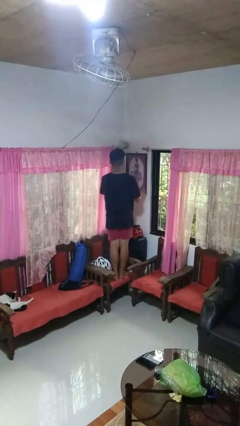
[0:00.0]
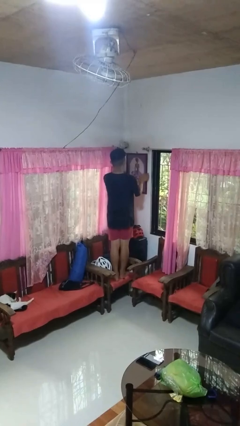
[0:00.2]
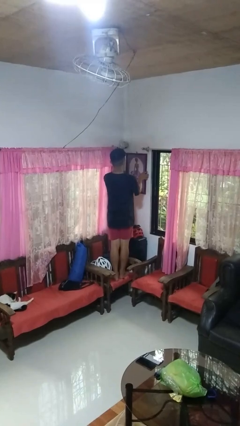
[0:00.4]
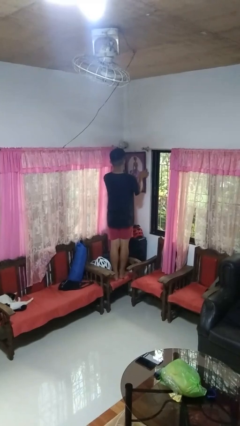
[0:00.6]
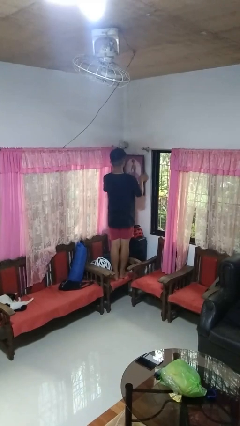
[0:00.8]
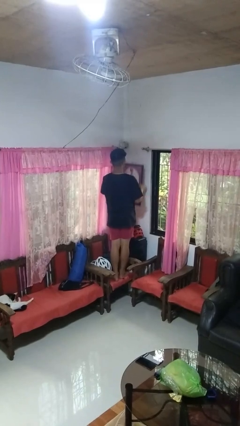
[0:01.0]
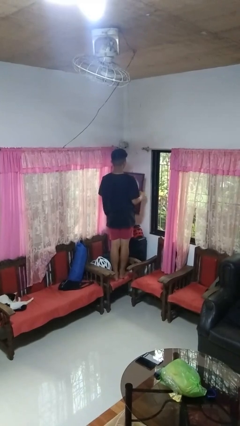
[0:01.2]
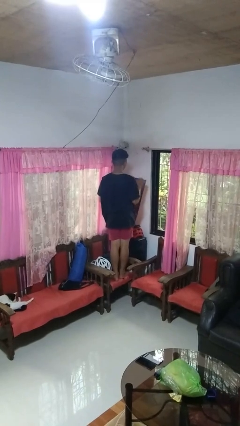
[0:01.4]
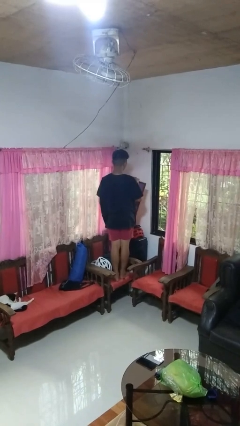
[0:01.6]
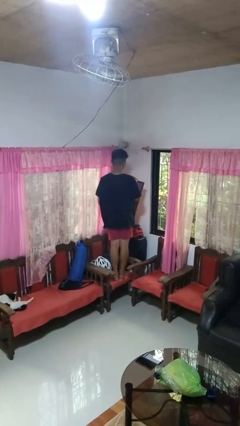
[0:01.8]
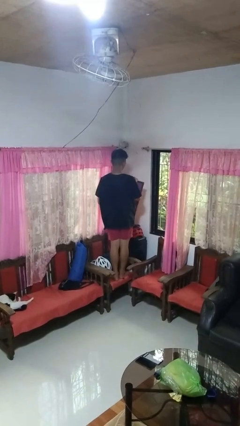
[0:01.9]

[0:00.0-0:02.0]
person takes down picture frame

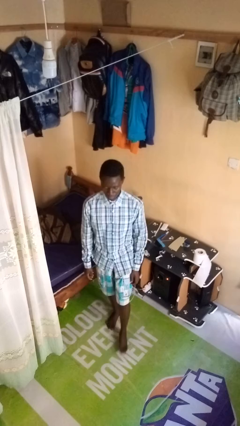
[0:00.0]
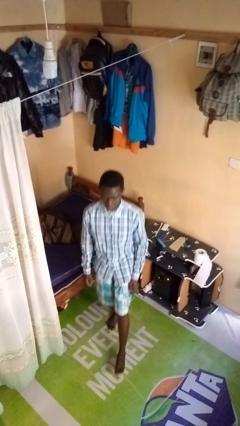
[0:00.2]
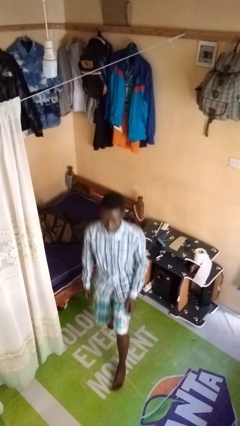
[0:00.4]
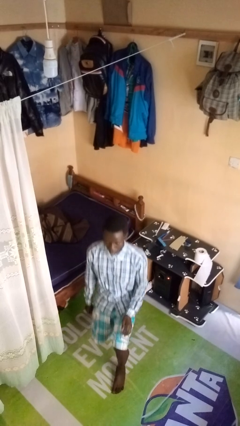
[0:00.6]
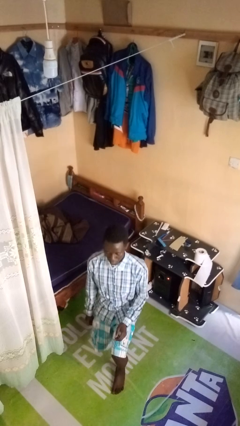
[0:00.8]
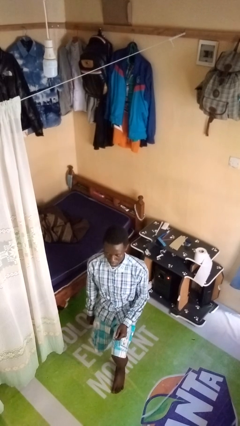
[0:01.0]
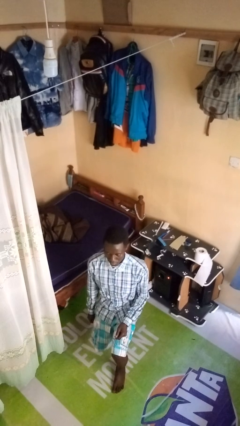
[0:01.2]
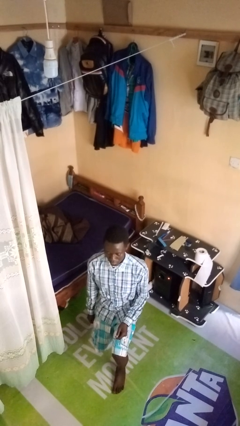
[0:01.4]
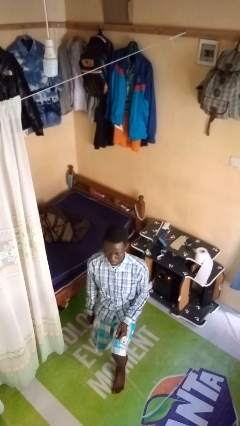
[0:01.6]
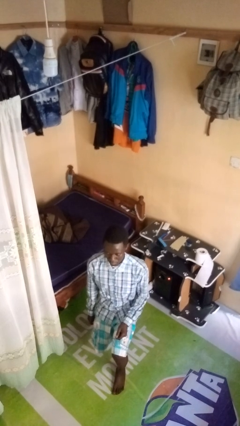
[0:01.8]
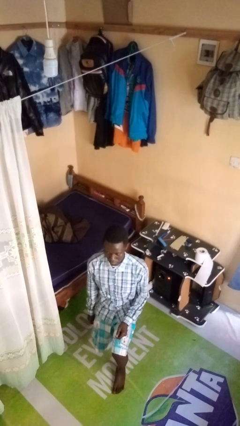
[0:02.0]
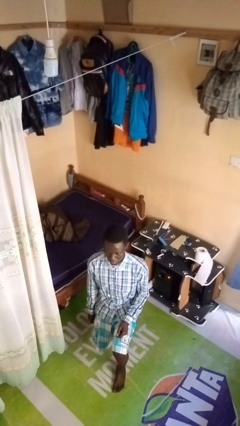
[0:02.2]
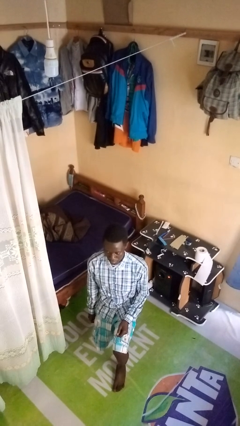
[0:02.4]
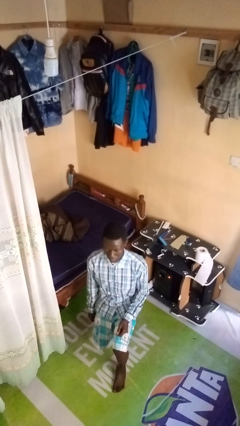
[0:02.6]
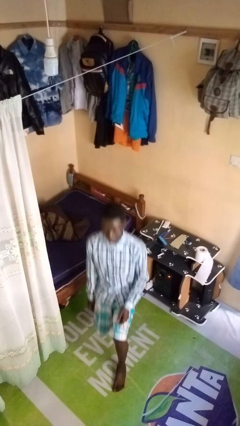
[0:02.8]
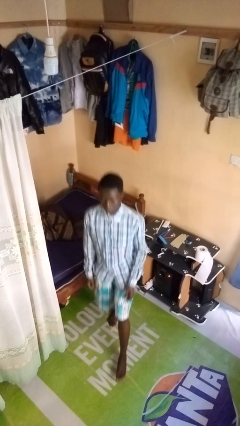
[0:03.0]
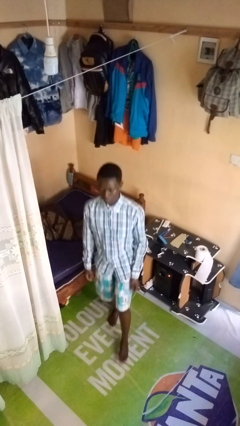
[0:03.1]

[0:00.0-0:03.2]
person exercises with lunges

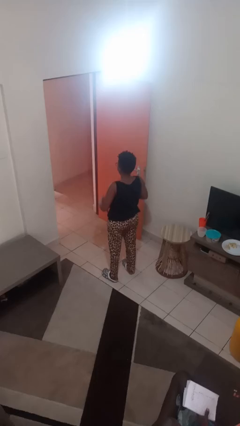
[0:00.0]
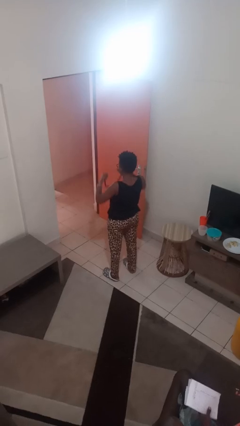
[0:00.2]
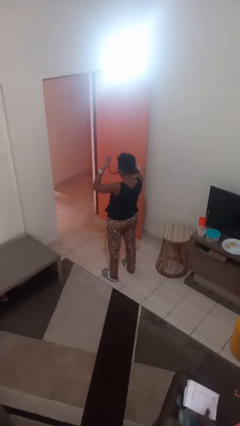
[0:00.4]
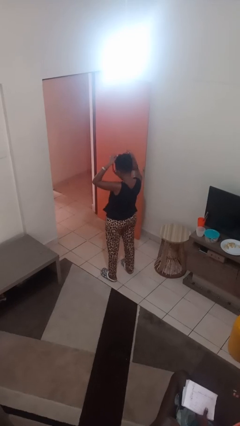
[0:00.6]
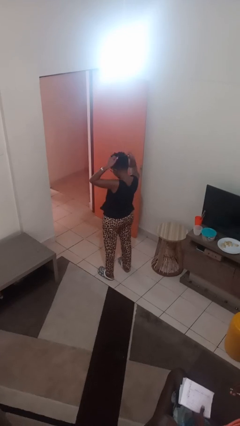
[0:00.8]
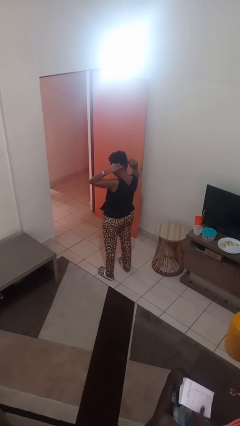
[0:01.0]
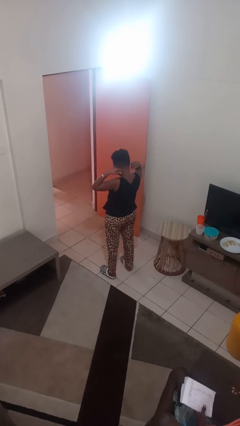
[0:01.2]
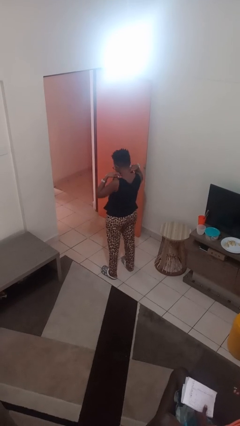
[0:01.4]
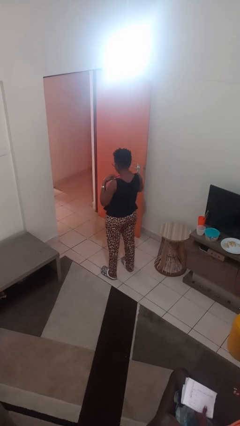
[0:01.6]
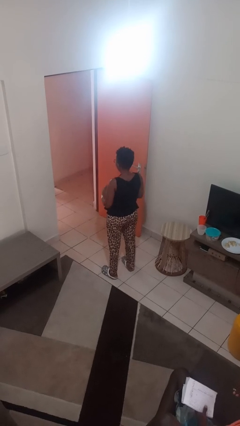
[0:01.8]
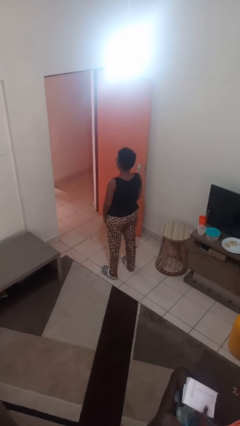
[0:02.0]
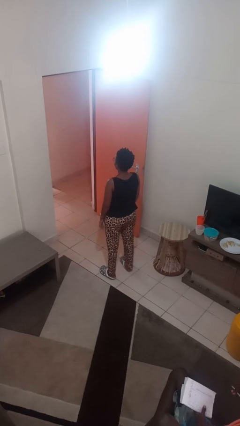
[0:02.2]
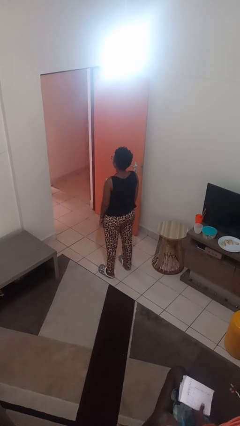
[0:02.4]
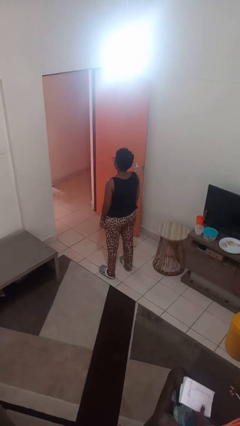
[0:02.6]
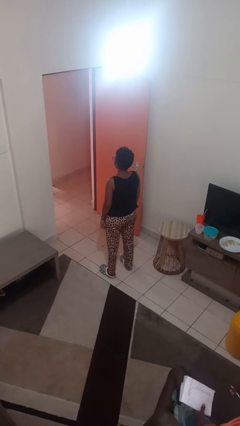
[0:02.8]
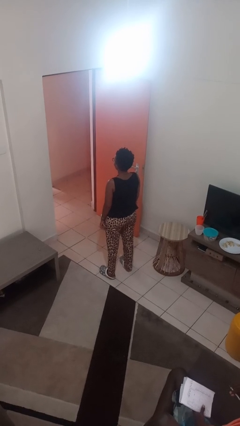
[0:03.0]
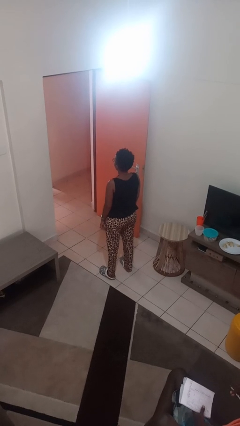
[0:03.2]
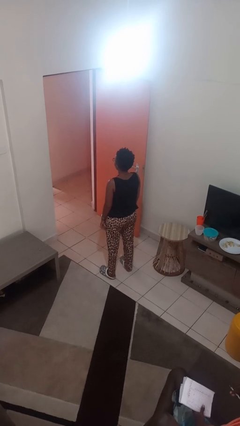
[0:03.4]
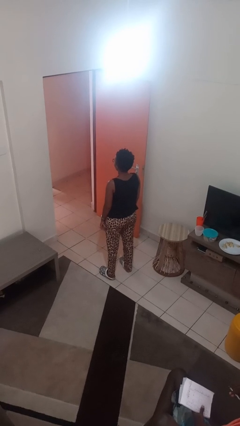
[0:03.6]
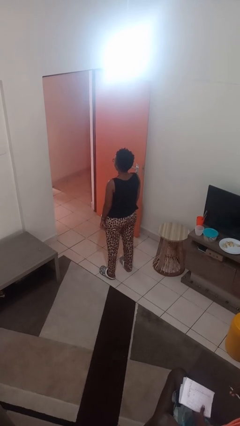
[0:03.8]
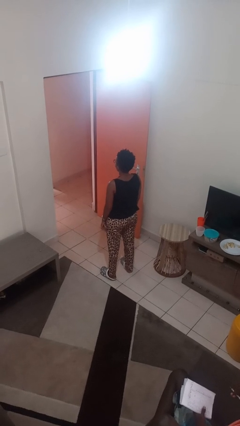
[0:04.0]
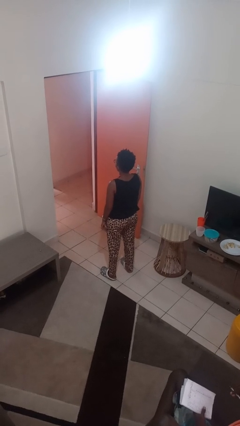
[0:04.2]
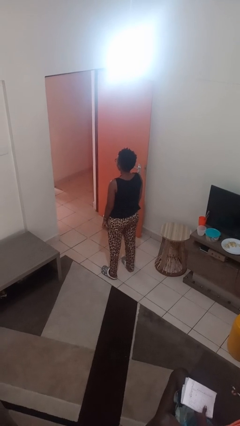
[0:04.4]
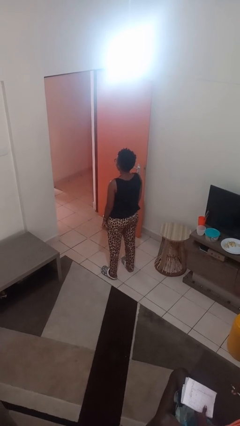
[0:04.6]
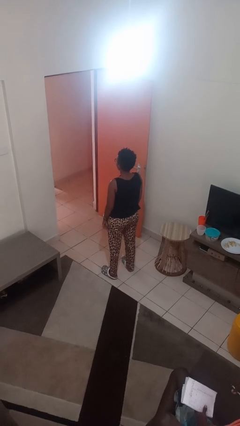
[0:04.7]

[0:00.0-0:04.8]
person puts on necklace

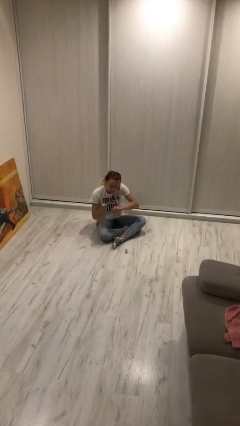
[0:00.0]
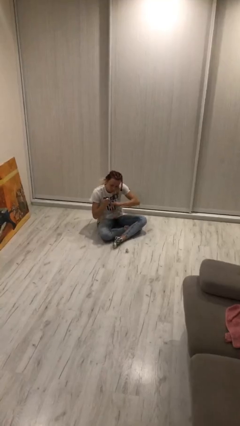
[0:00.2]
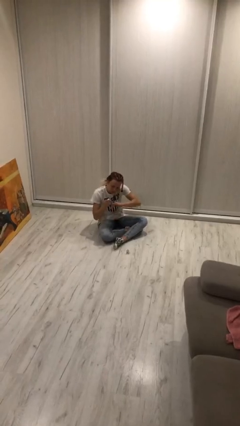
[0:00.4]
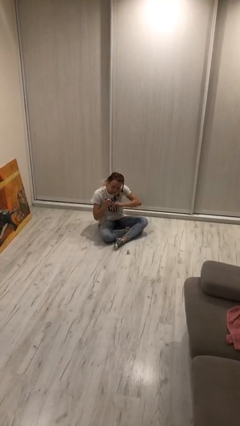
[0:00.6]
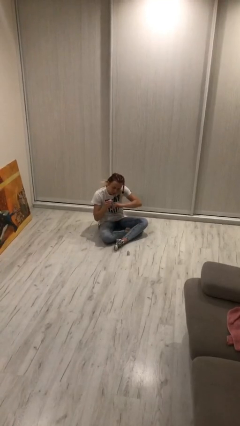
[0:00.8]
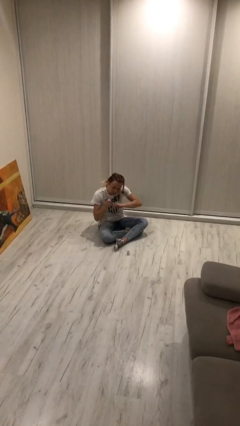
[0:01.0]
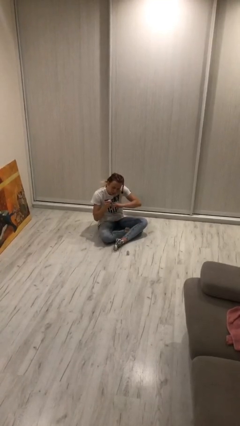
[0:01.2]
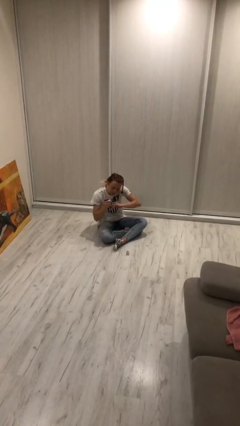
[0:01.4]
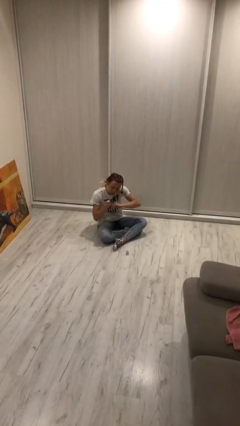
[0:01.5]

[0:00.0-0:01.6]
person paints fingernails

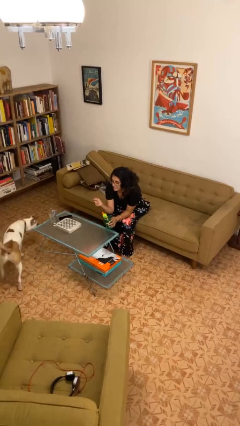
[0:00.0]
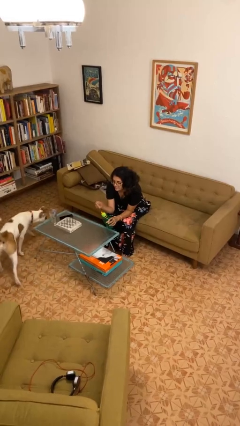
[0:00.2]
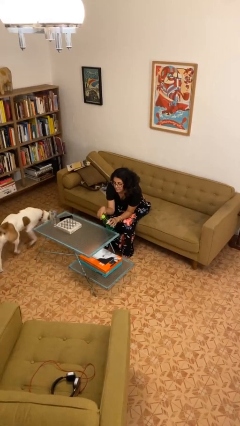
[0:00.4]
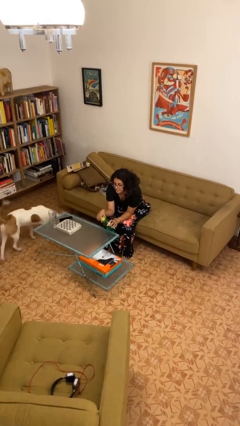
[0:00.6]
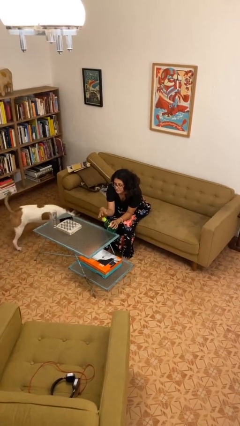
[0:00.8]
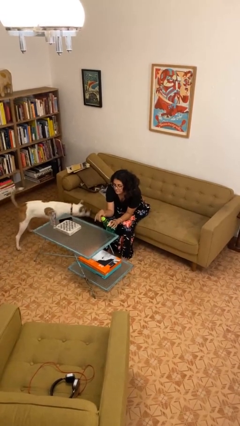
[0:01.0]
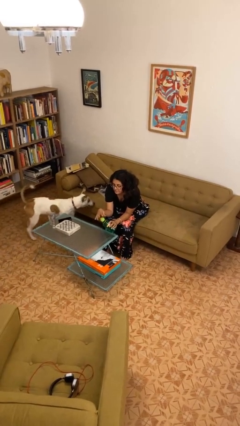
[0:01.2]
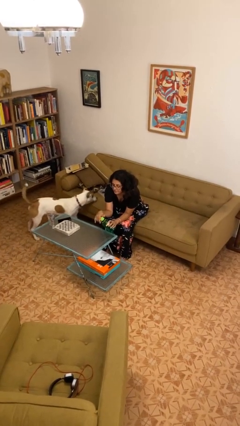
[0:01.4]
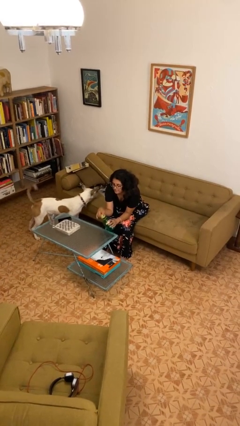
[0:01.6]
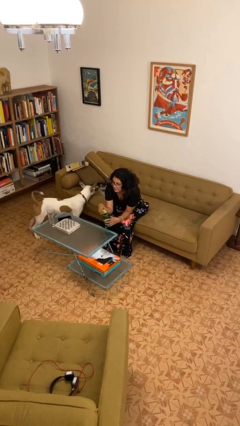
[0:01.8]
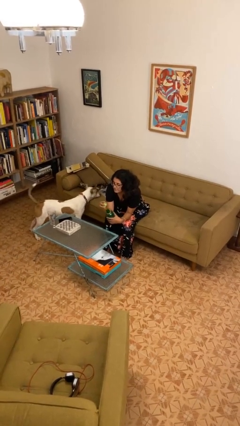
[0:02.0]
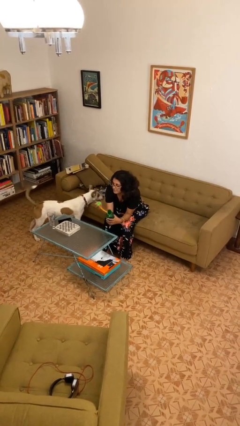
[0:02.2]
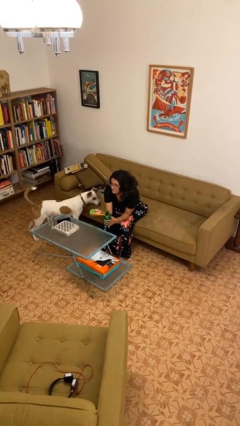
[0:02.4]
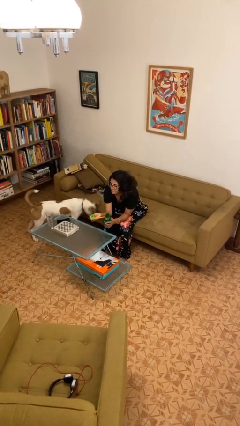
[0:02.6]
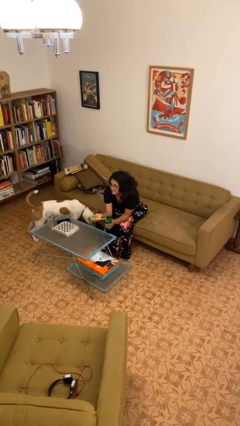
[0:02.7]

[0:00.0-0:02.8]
person unscrews lid from bottle

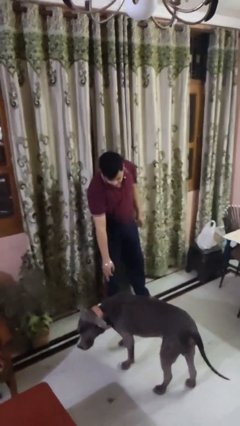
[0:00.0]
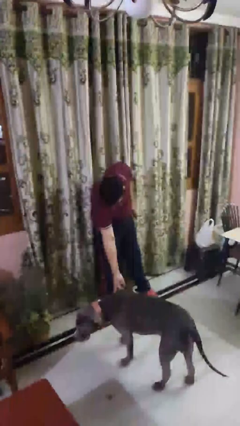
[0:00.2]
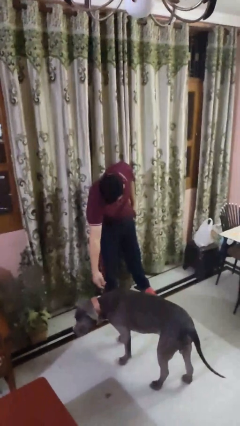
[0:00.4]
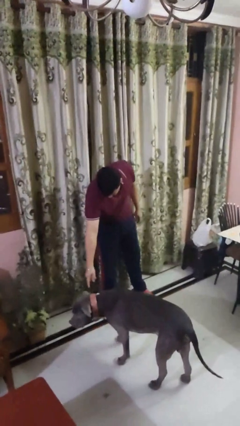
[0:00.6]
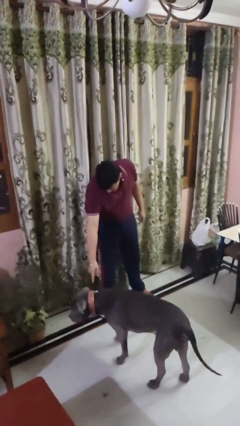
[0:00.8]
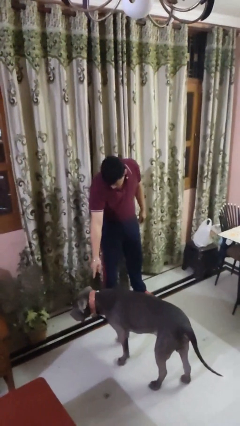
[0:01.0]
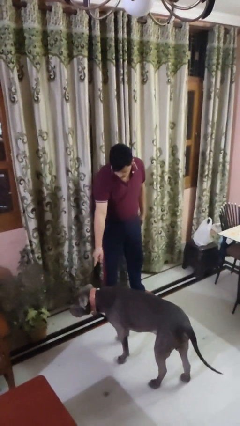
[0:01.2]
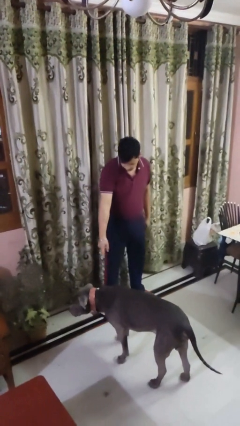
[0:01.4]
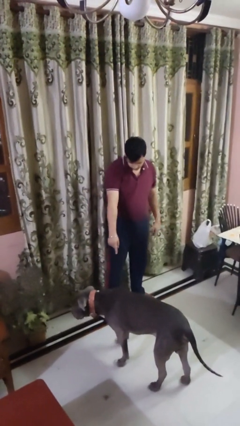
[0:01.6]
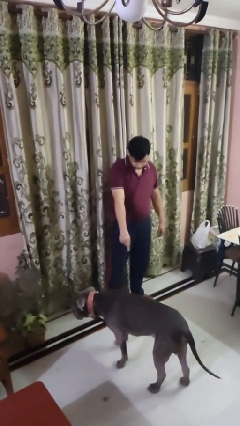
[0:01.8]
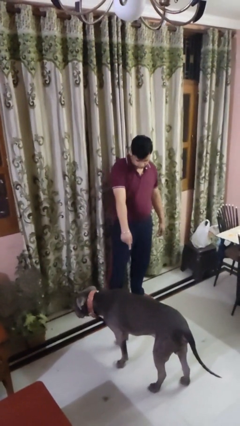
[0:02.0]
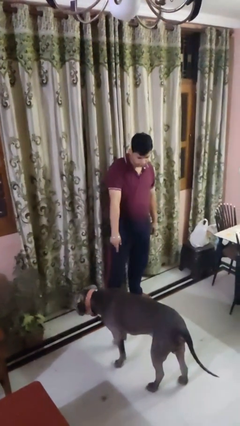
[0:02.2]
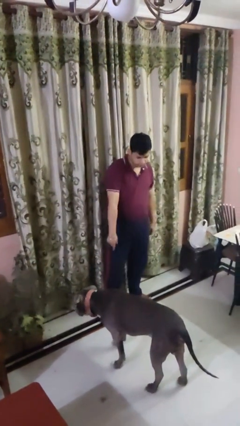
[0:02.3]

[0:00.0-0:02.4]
person points to dog

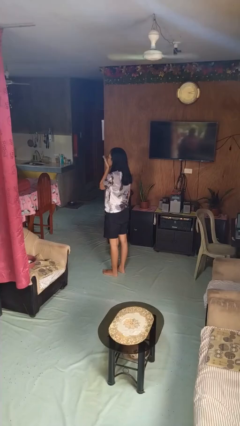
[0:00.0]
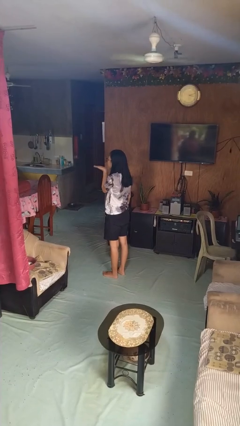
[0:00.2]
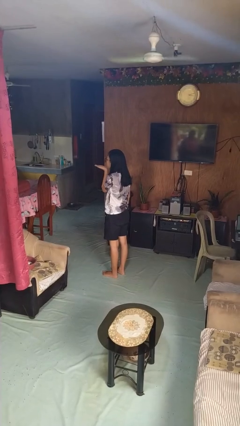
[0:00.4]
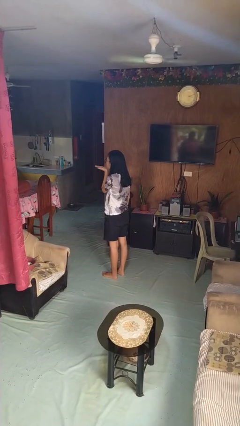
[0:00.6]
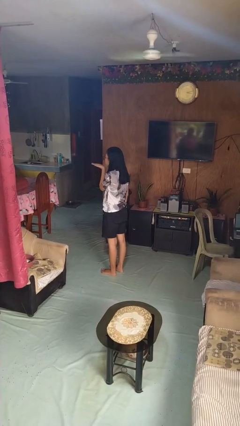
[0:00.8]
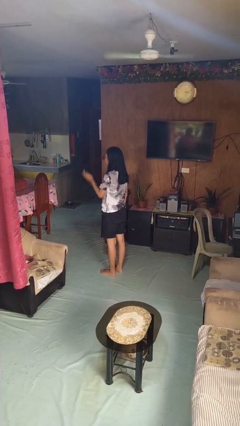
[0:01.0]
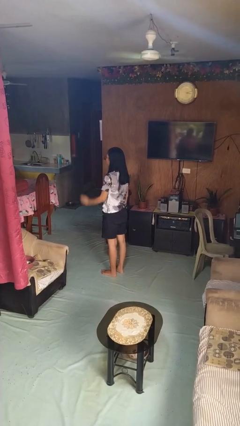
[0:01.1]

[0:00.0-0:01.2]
person gestures blow kiss
